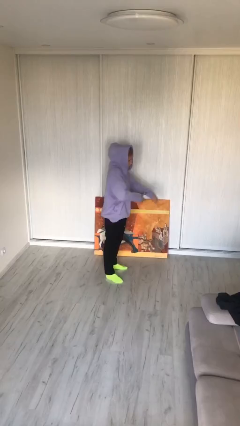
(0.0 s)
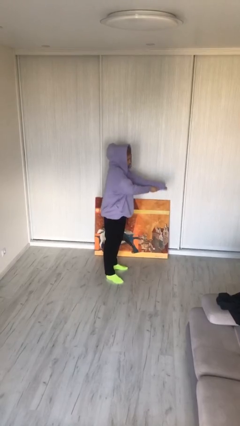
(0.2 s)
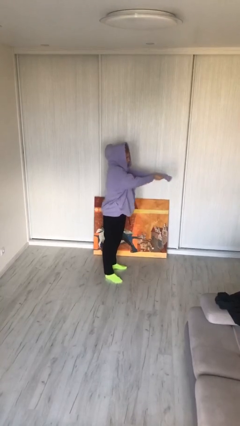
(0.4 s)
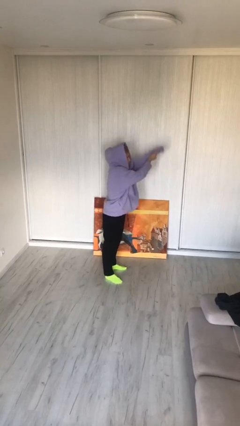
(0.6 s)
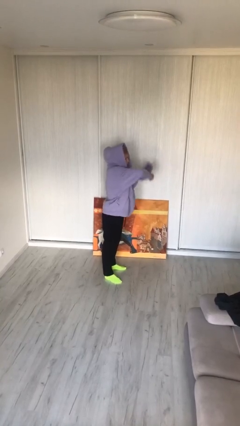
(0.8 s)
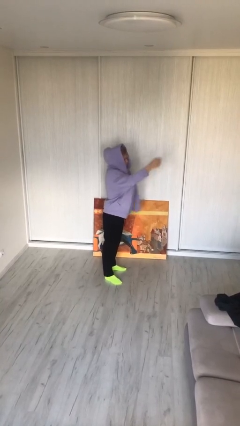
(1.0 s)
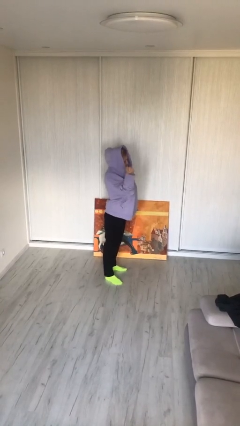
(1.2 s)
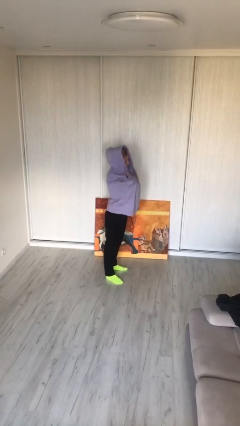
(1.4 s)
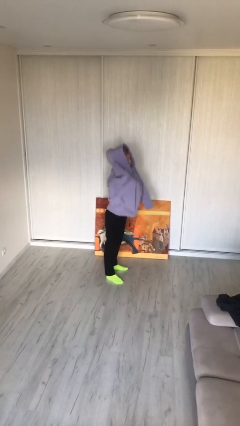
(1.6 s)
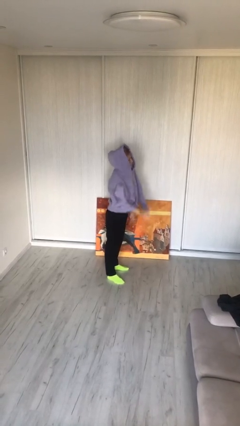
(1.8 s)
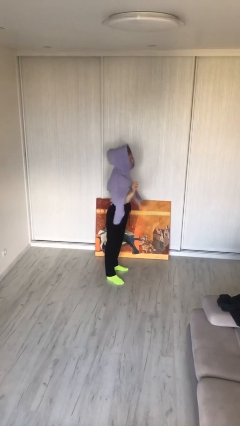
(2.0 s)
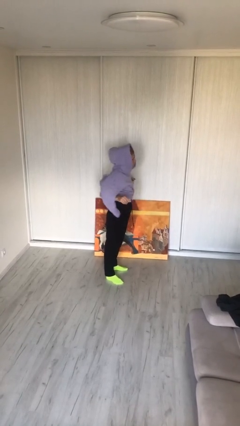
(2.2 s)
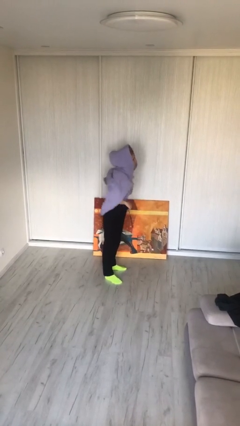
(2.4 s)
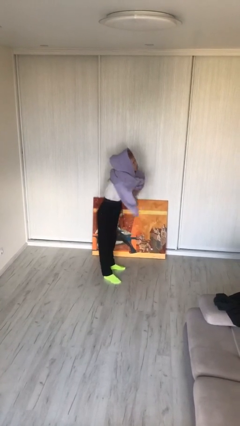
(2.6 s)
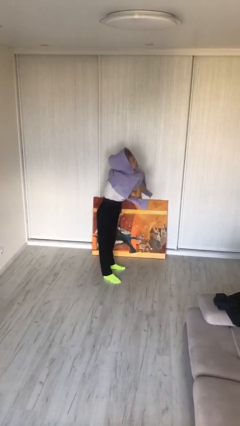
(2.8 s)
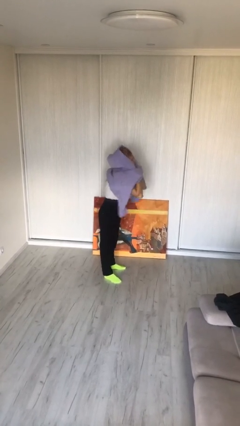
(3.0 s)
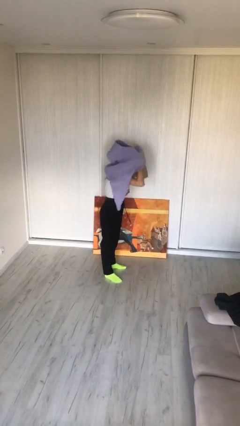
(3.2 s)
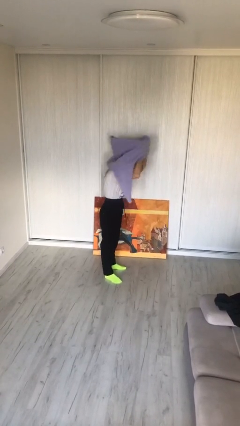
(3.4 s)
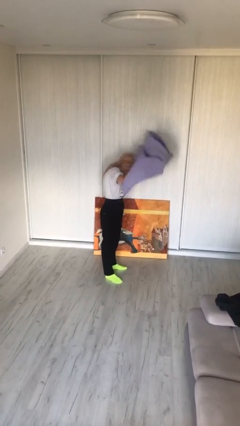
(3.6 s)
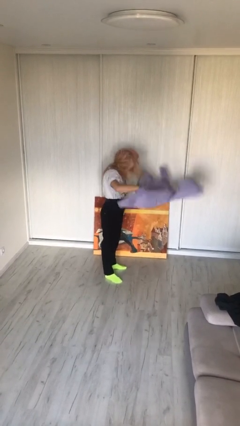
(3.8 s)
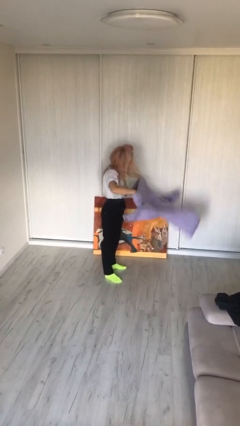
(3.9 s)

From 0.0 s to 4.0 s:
person takes off hoodie

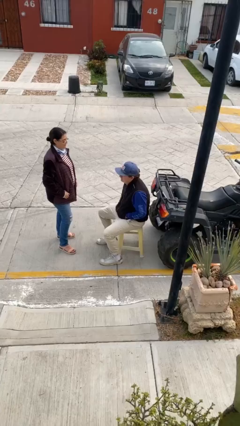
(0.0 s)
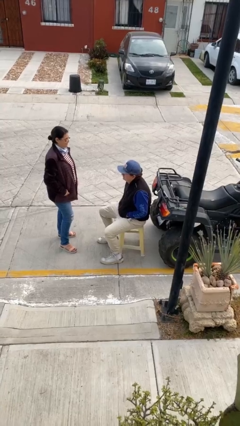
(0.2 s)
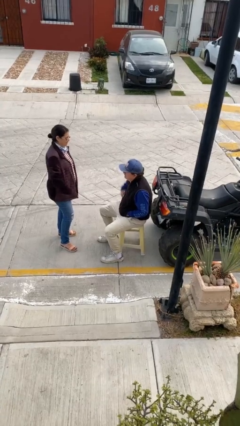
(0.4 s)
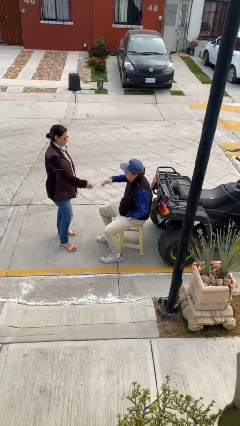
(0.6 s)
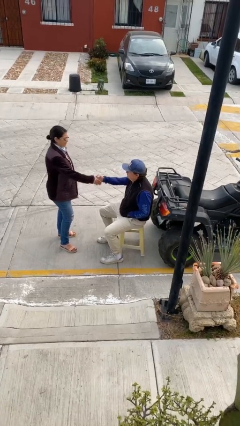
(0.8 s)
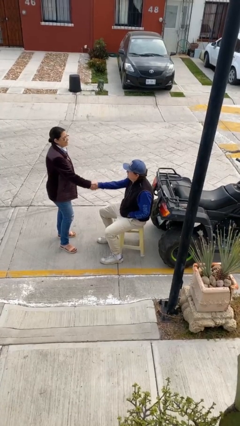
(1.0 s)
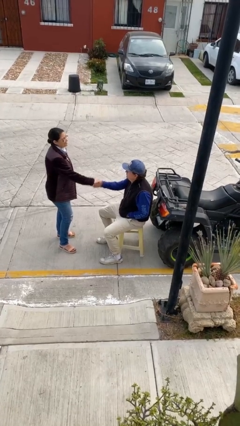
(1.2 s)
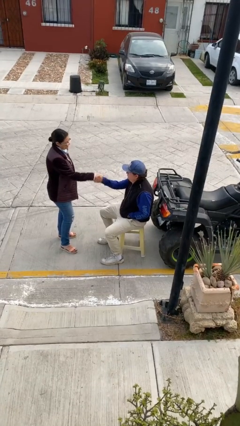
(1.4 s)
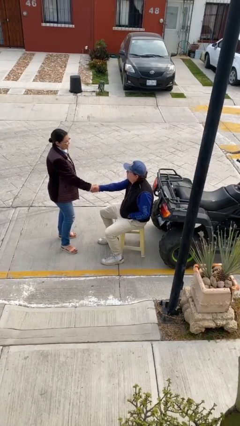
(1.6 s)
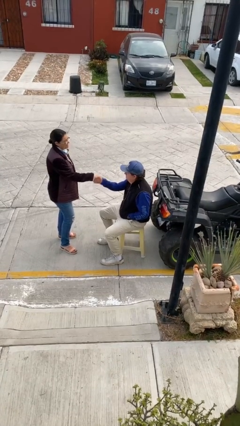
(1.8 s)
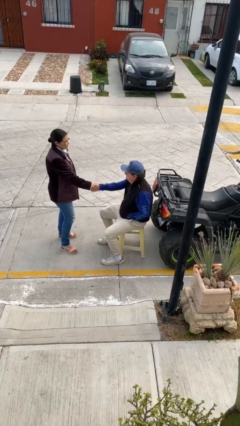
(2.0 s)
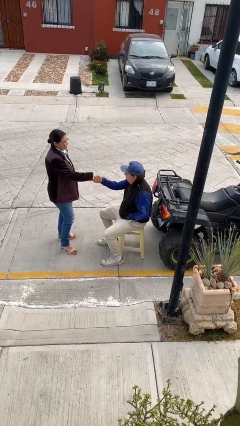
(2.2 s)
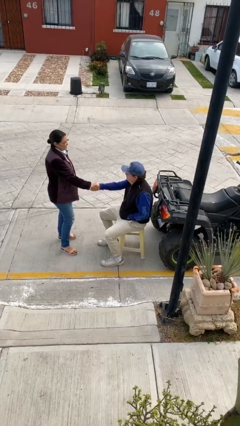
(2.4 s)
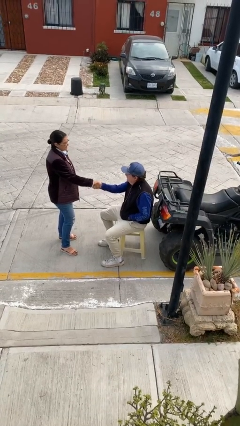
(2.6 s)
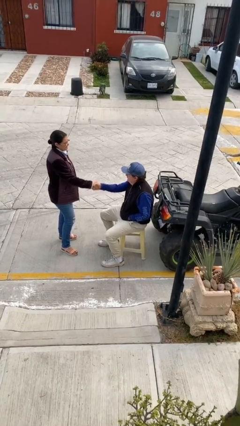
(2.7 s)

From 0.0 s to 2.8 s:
person shakes hand

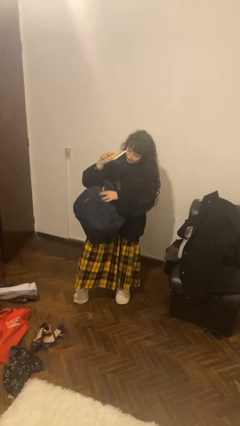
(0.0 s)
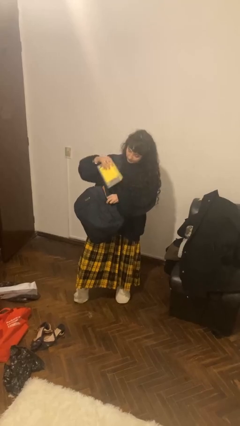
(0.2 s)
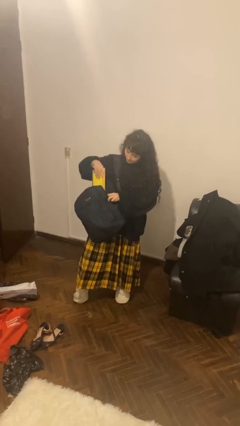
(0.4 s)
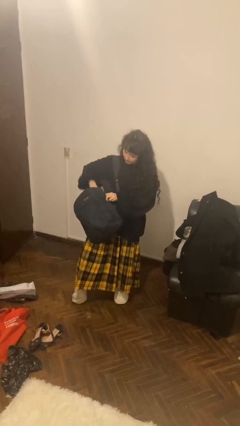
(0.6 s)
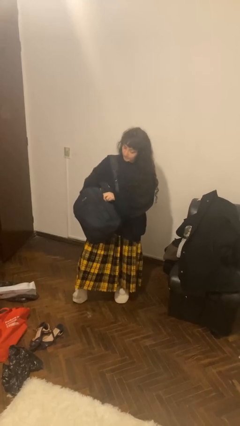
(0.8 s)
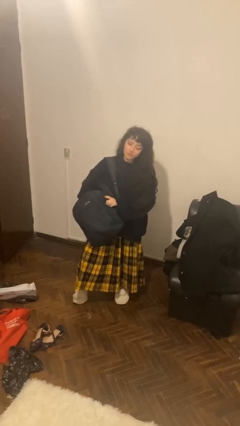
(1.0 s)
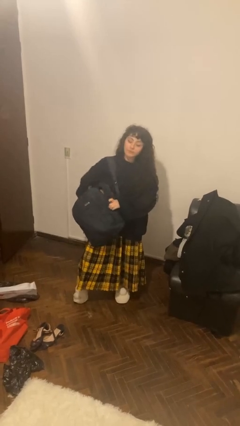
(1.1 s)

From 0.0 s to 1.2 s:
person puts object into backpack

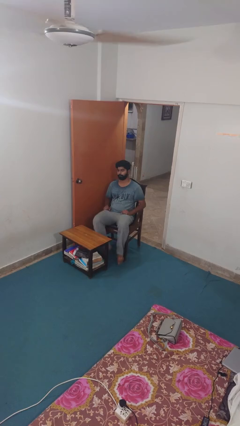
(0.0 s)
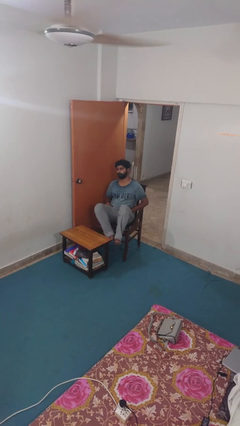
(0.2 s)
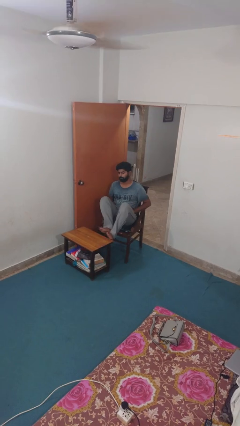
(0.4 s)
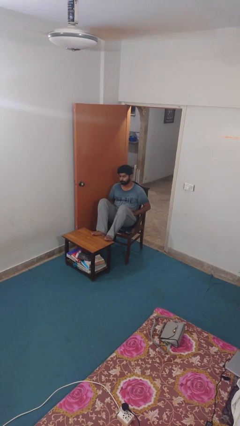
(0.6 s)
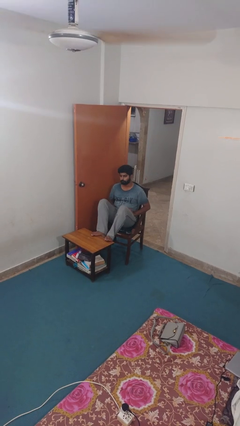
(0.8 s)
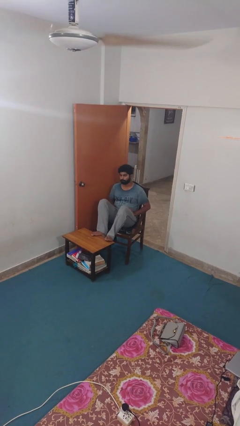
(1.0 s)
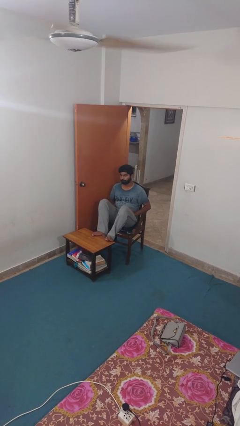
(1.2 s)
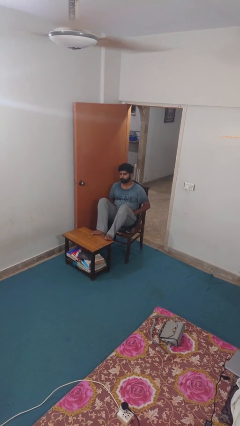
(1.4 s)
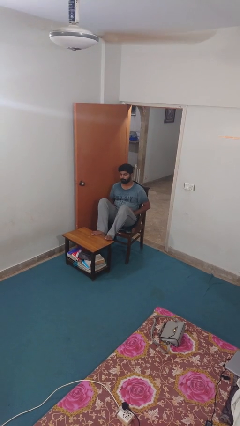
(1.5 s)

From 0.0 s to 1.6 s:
person puts feet up

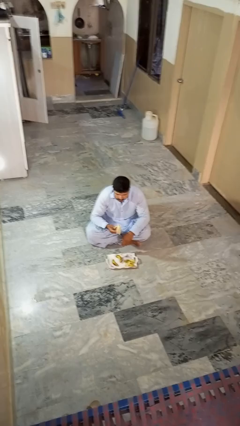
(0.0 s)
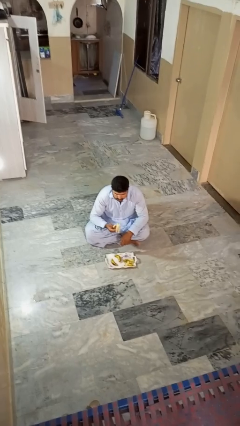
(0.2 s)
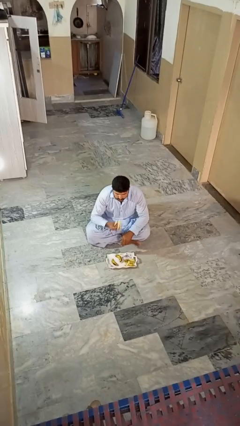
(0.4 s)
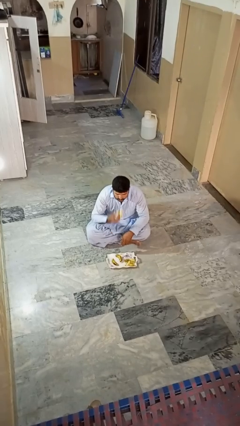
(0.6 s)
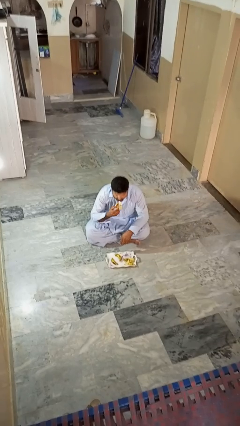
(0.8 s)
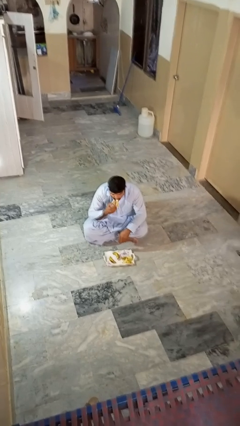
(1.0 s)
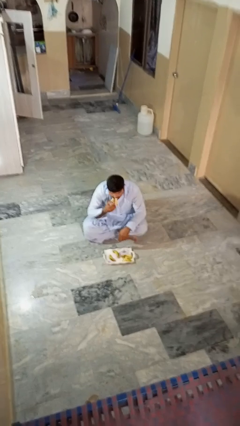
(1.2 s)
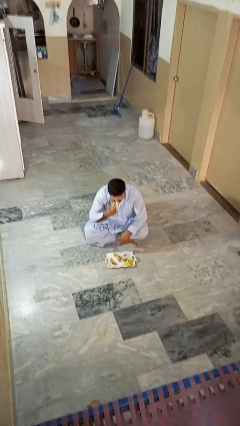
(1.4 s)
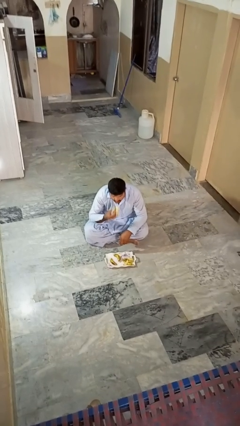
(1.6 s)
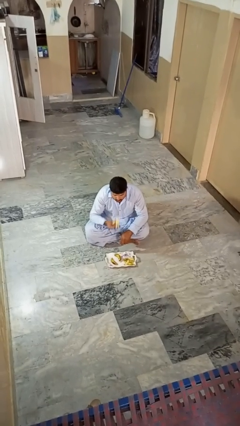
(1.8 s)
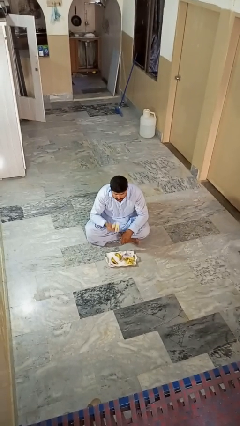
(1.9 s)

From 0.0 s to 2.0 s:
person eats banana

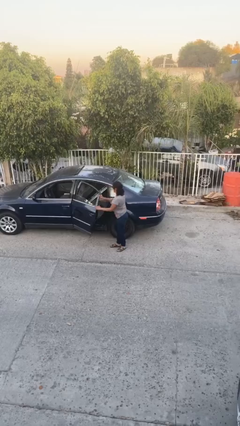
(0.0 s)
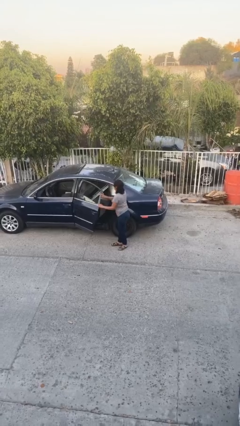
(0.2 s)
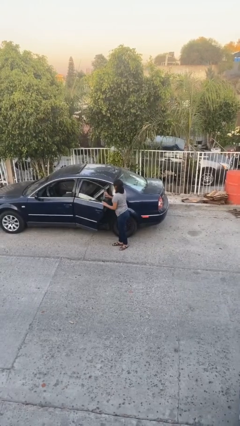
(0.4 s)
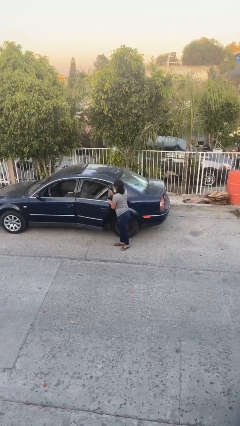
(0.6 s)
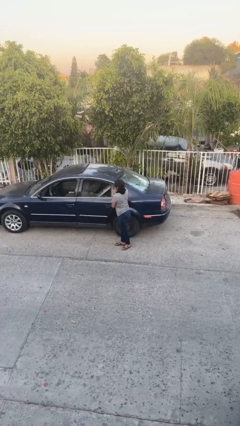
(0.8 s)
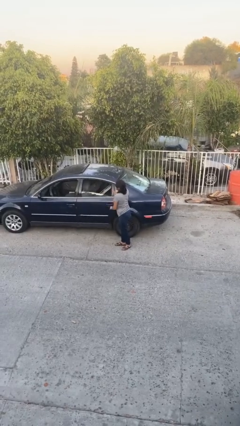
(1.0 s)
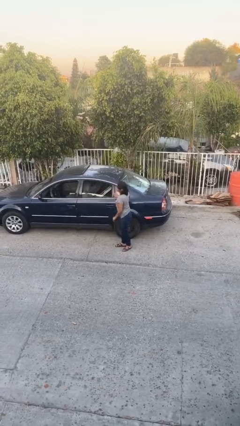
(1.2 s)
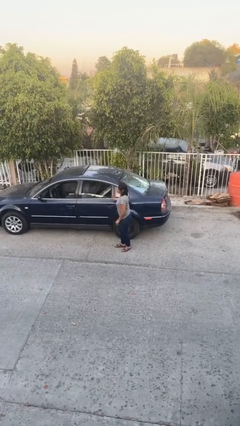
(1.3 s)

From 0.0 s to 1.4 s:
person closes car door

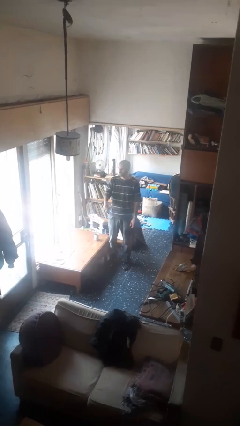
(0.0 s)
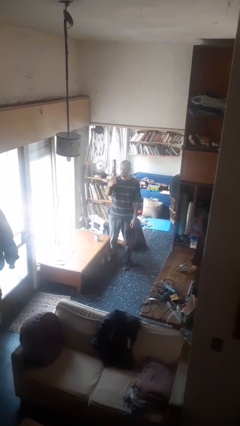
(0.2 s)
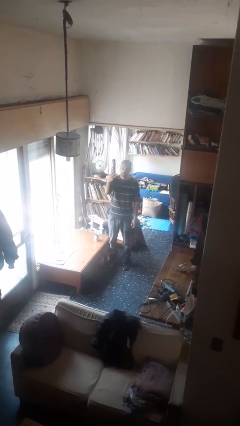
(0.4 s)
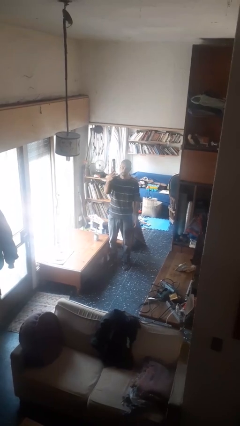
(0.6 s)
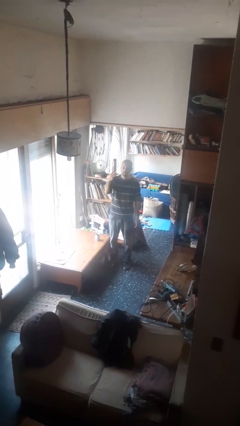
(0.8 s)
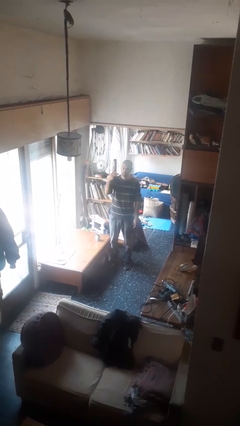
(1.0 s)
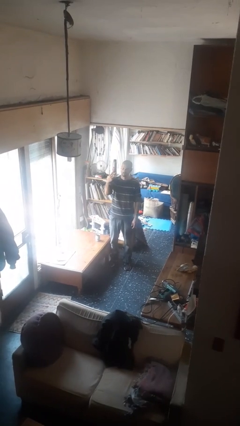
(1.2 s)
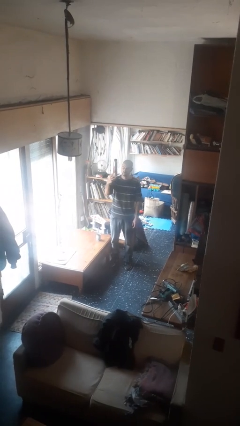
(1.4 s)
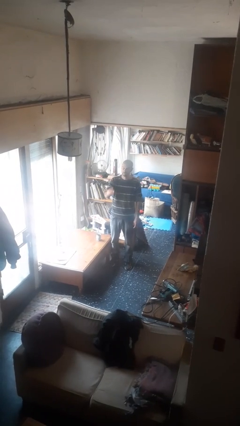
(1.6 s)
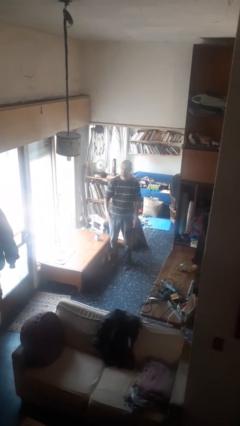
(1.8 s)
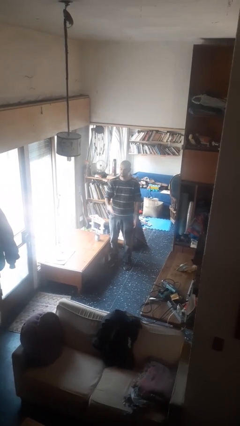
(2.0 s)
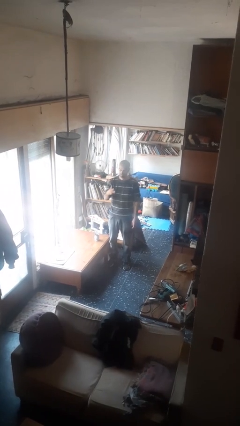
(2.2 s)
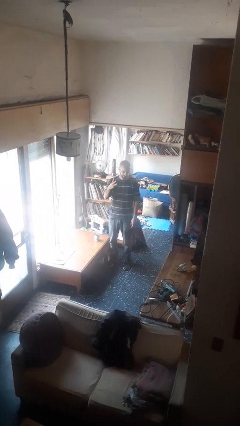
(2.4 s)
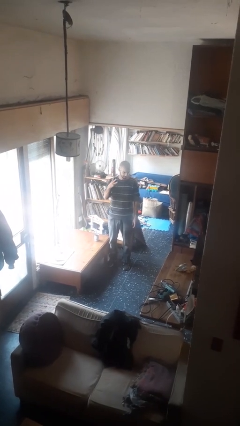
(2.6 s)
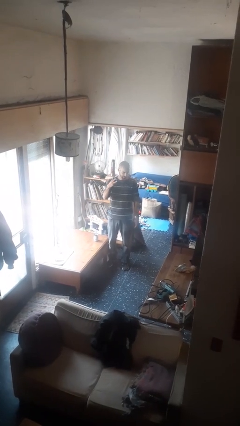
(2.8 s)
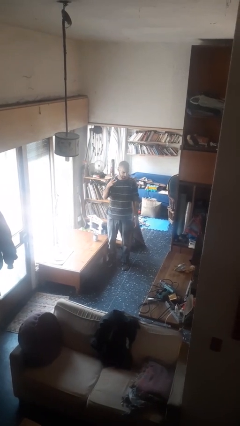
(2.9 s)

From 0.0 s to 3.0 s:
person gestures number three

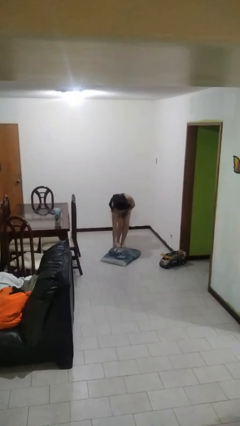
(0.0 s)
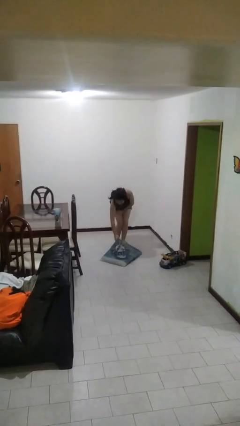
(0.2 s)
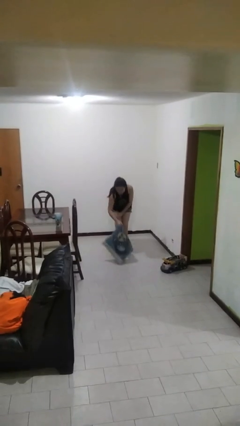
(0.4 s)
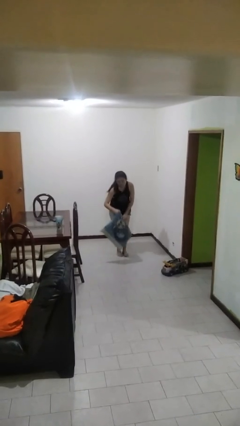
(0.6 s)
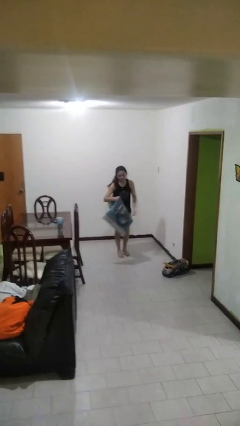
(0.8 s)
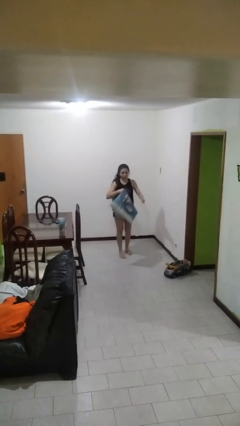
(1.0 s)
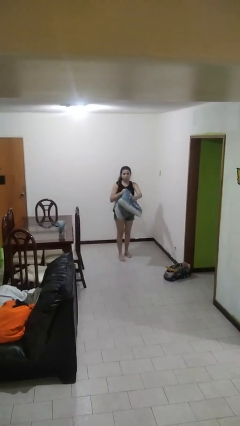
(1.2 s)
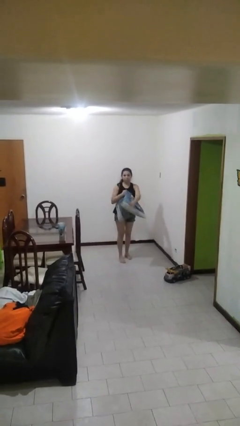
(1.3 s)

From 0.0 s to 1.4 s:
person picks up object from floor
